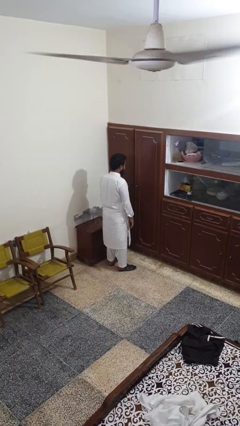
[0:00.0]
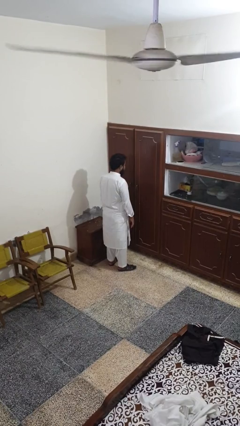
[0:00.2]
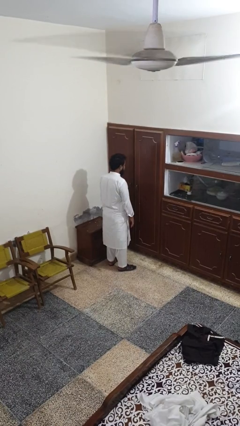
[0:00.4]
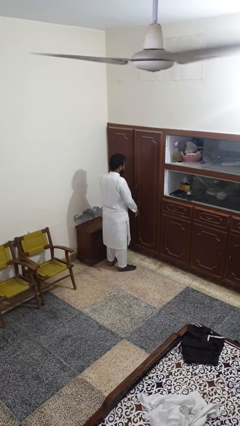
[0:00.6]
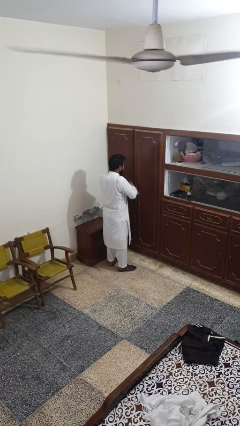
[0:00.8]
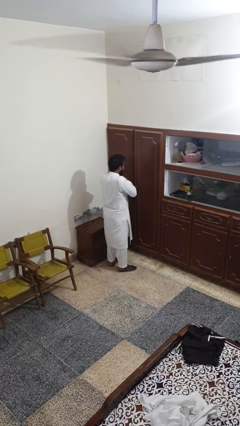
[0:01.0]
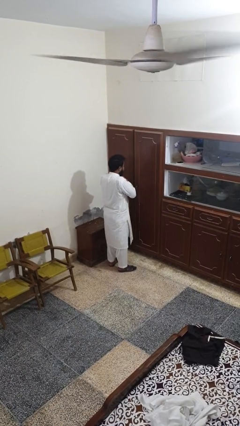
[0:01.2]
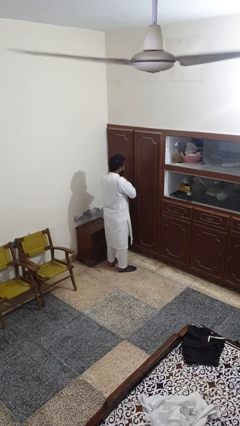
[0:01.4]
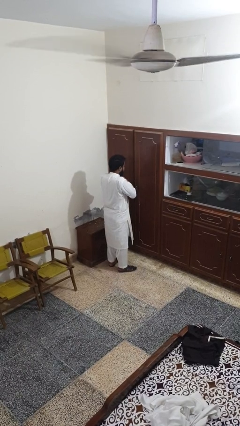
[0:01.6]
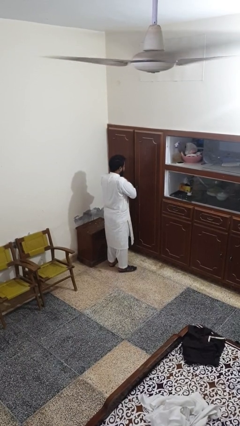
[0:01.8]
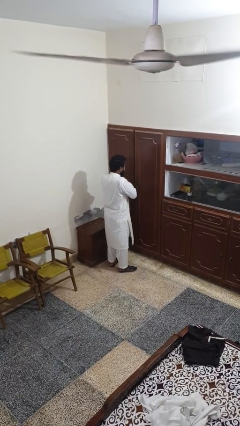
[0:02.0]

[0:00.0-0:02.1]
person prays

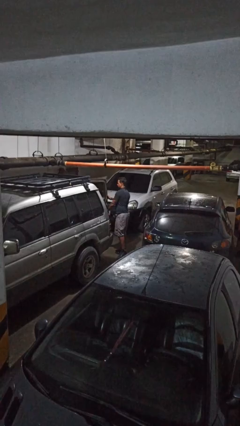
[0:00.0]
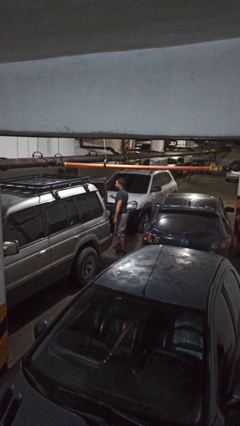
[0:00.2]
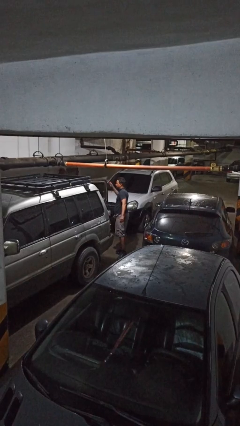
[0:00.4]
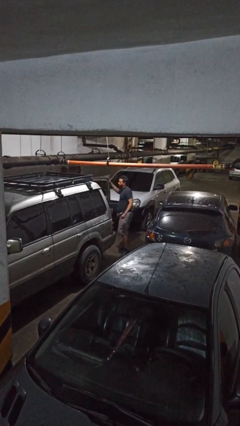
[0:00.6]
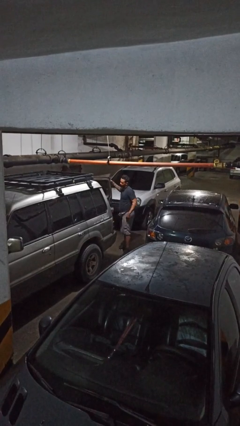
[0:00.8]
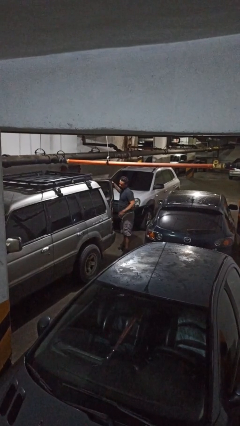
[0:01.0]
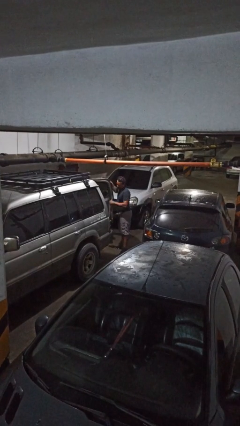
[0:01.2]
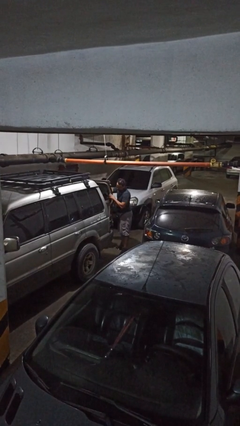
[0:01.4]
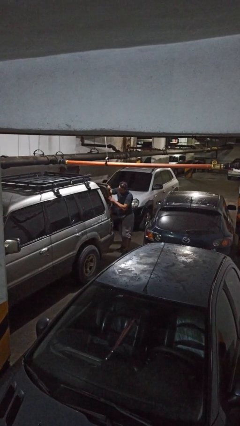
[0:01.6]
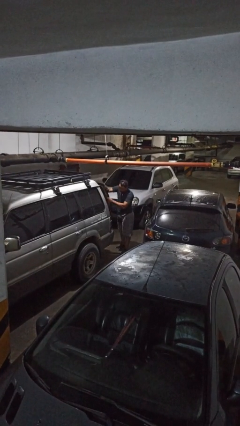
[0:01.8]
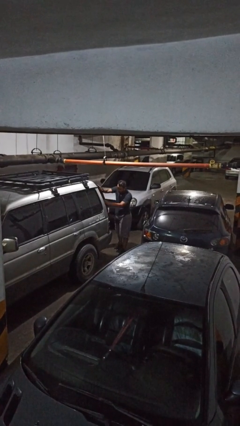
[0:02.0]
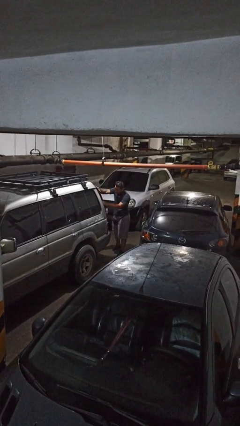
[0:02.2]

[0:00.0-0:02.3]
person closes car trunk

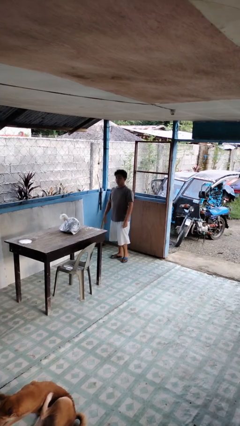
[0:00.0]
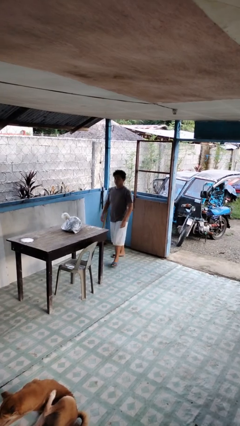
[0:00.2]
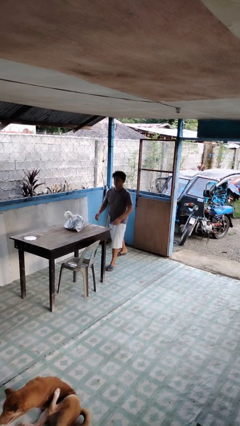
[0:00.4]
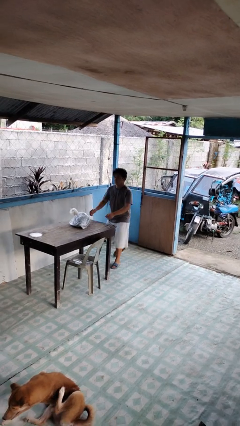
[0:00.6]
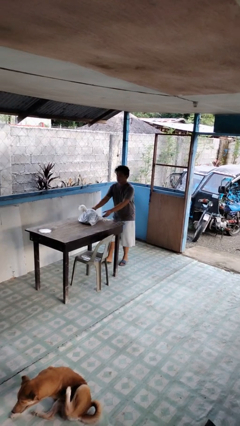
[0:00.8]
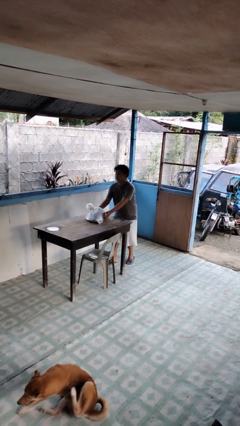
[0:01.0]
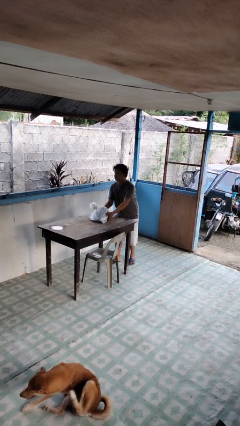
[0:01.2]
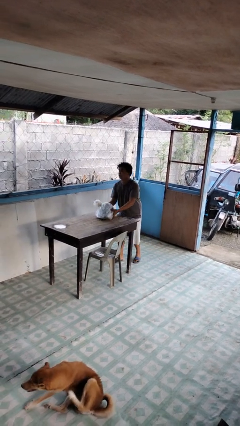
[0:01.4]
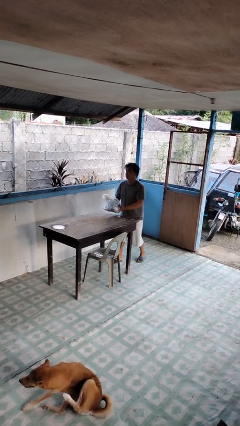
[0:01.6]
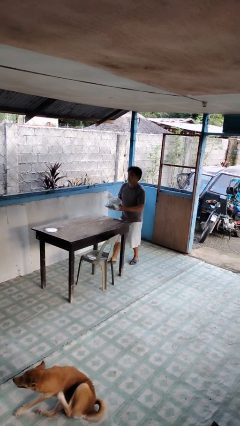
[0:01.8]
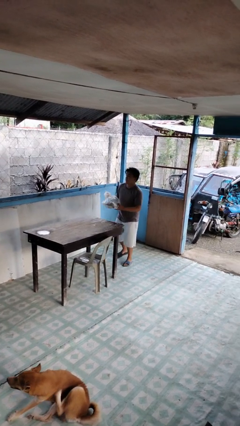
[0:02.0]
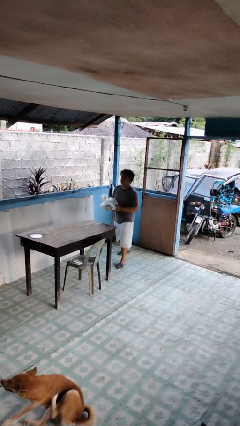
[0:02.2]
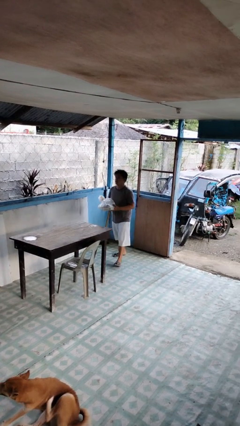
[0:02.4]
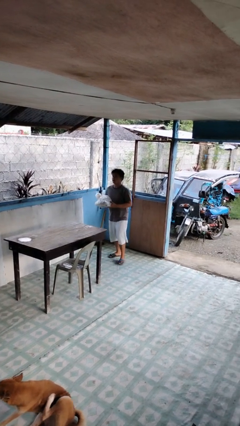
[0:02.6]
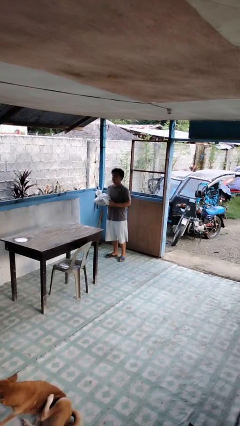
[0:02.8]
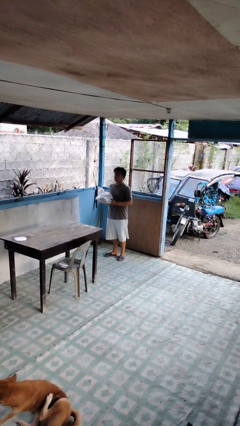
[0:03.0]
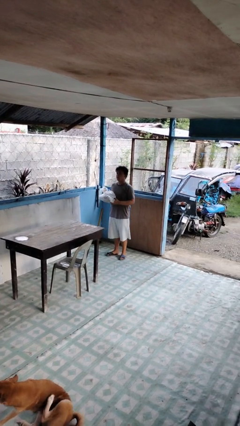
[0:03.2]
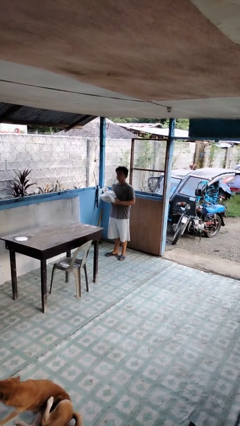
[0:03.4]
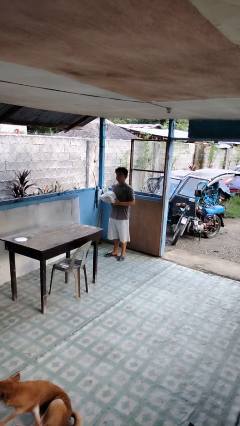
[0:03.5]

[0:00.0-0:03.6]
person picks up object from table

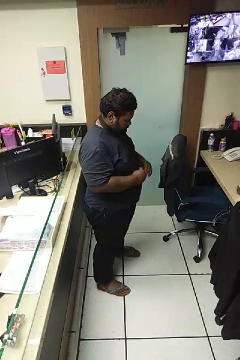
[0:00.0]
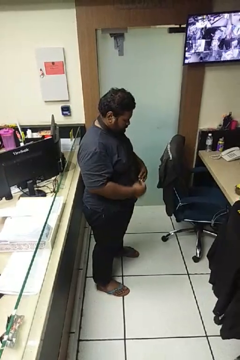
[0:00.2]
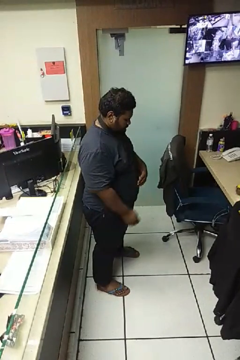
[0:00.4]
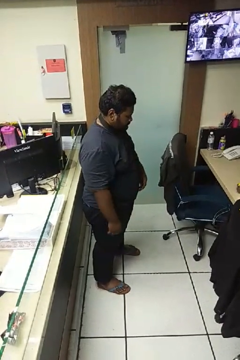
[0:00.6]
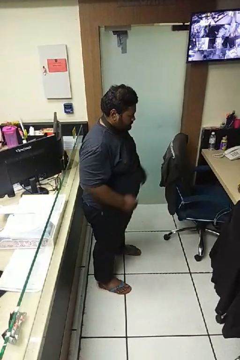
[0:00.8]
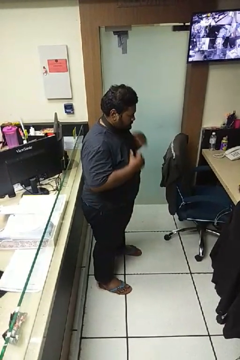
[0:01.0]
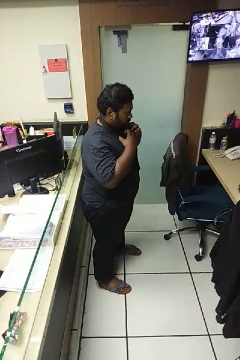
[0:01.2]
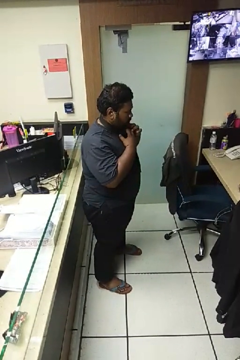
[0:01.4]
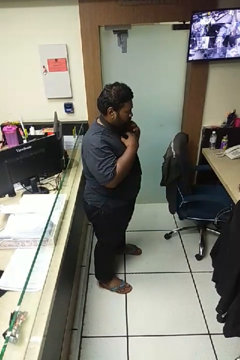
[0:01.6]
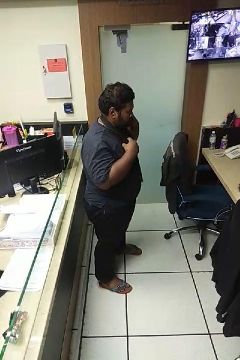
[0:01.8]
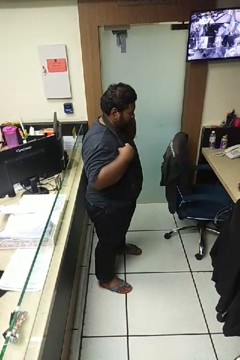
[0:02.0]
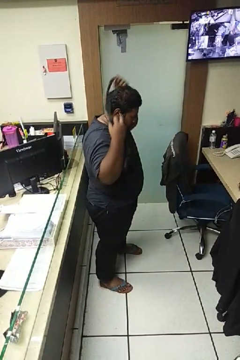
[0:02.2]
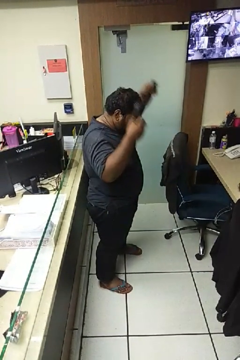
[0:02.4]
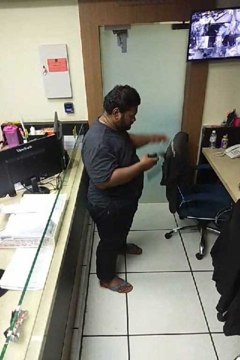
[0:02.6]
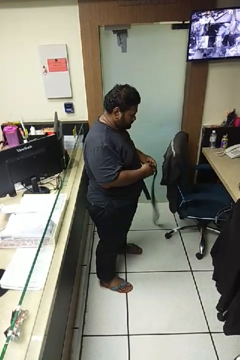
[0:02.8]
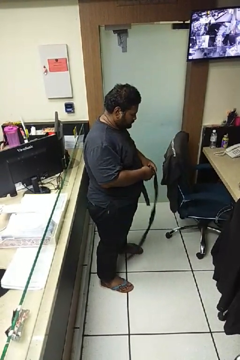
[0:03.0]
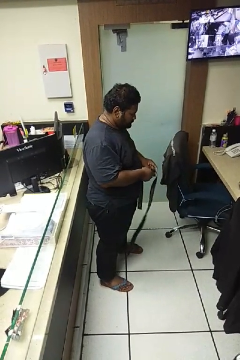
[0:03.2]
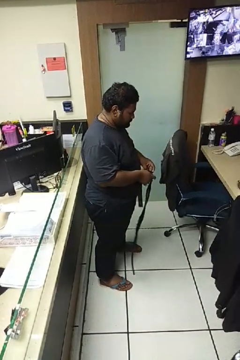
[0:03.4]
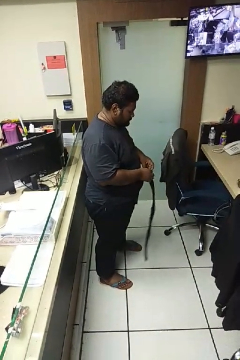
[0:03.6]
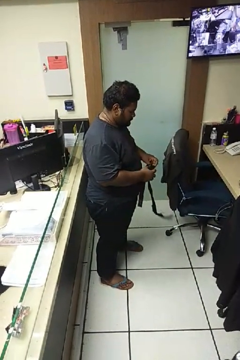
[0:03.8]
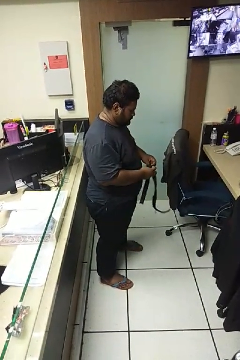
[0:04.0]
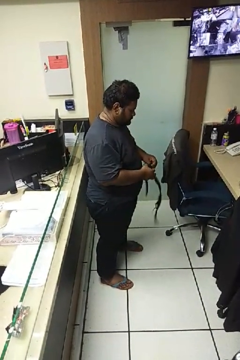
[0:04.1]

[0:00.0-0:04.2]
person takes off necktie

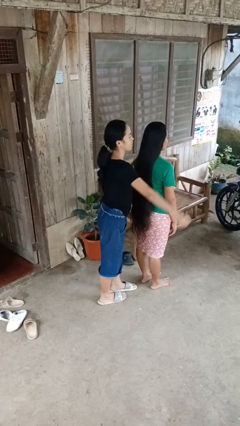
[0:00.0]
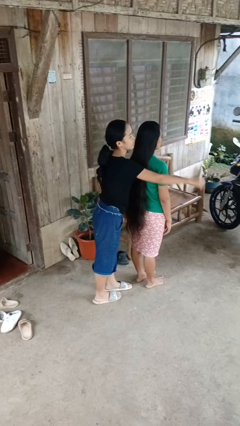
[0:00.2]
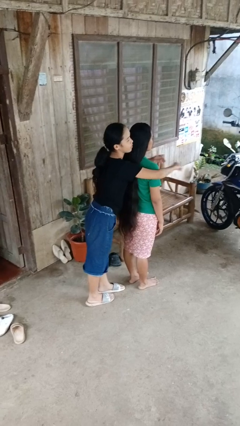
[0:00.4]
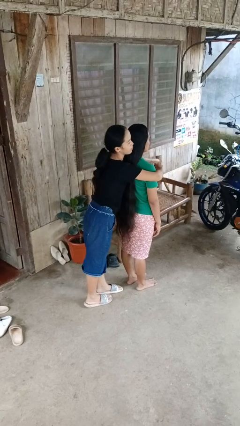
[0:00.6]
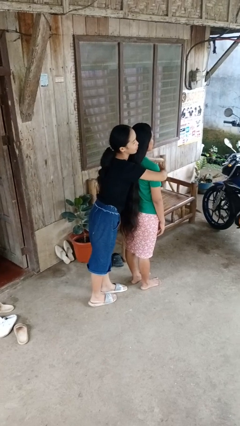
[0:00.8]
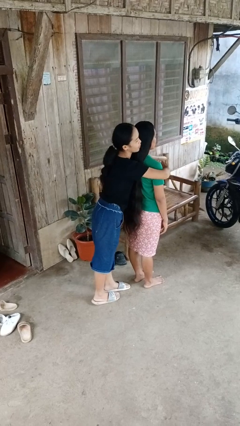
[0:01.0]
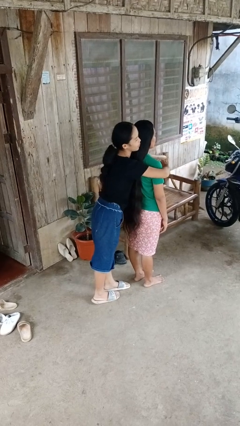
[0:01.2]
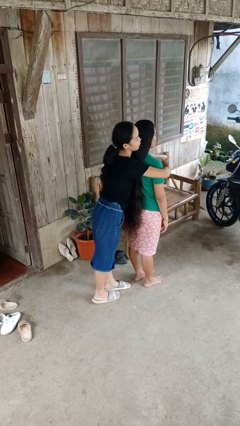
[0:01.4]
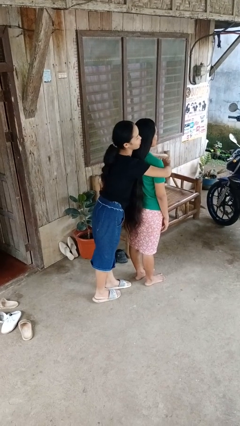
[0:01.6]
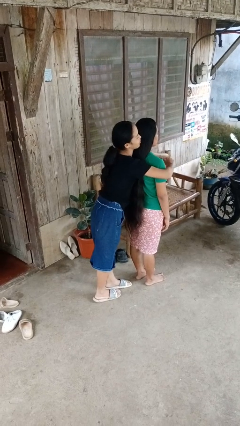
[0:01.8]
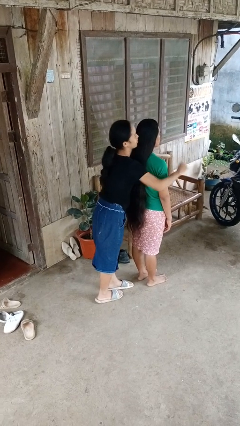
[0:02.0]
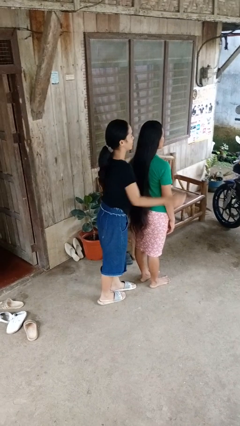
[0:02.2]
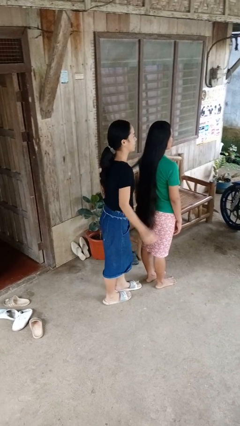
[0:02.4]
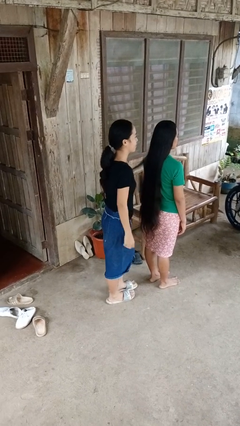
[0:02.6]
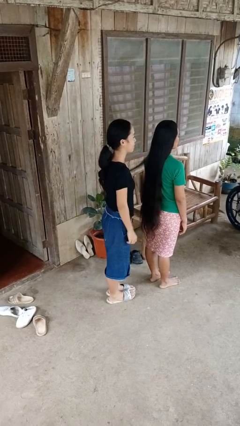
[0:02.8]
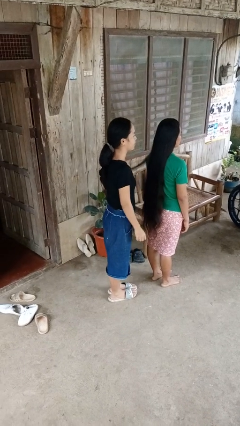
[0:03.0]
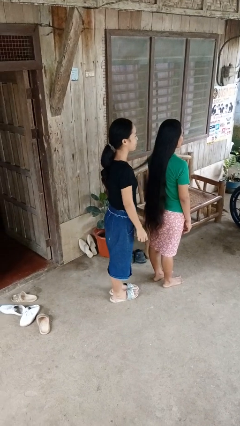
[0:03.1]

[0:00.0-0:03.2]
person hugs person from behind

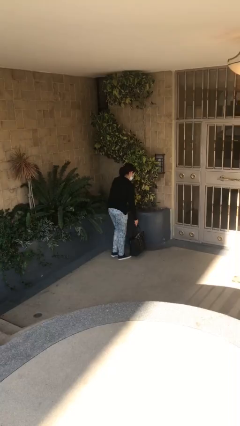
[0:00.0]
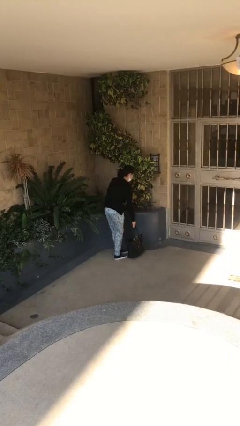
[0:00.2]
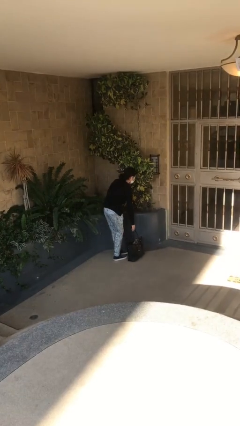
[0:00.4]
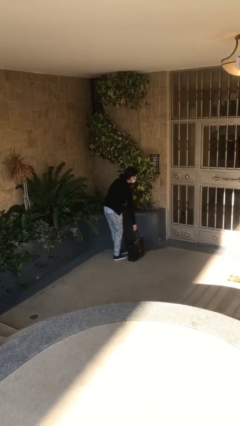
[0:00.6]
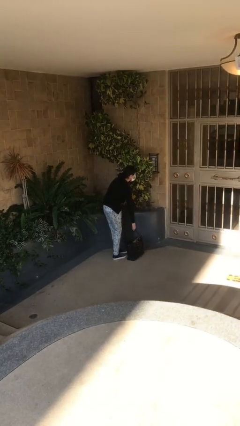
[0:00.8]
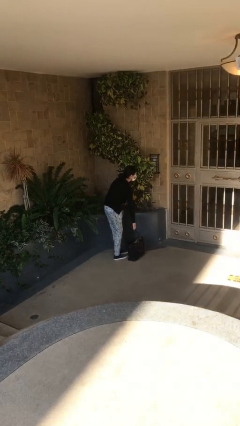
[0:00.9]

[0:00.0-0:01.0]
person puts down object on floor

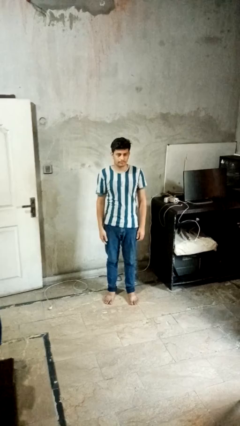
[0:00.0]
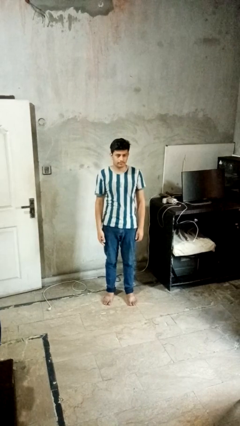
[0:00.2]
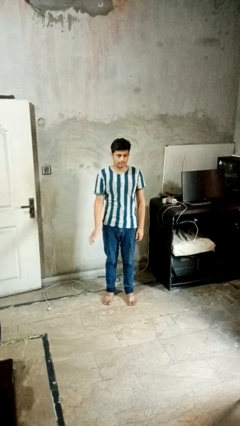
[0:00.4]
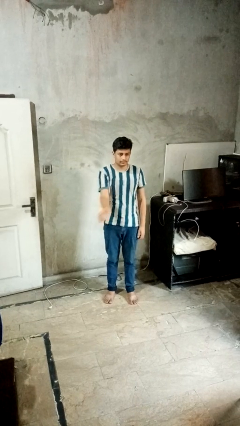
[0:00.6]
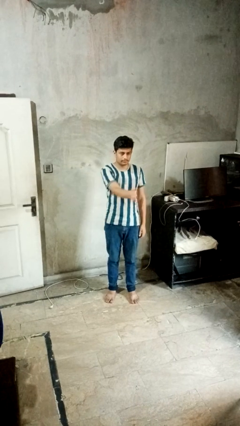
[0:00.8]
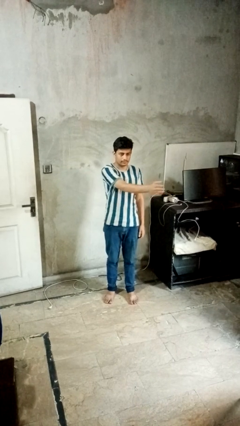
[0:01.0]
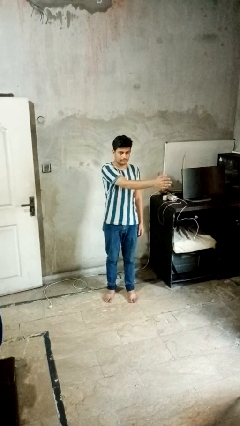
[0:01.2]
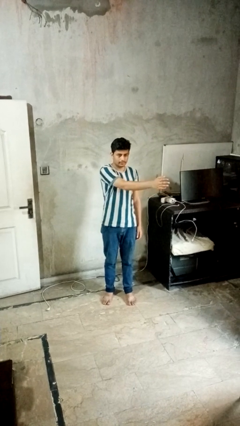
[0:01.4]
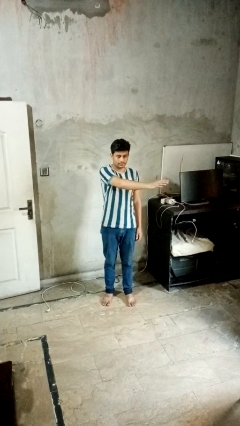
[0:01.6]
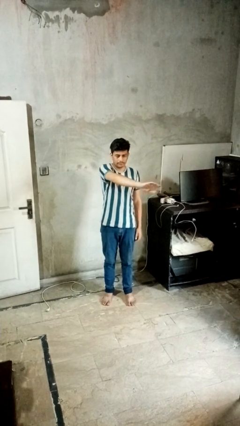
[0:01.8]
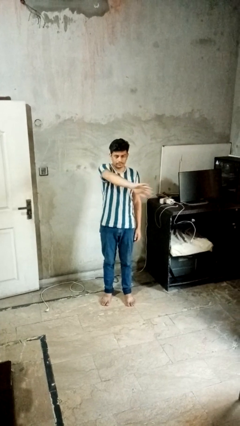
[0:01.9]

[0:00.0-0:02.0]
person gestures swipe left
